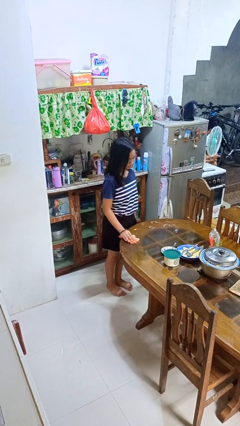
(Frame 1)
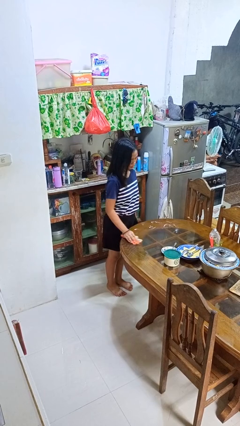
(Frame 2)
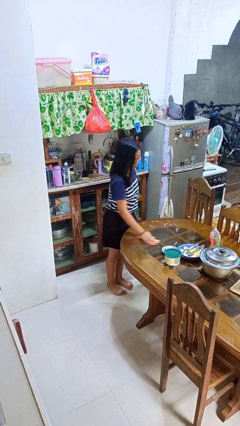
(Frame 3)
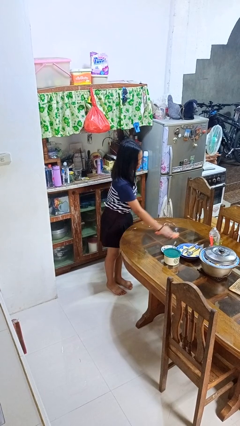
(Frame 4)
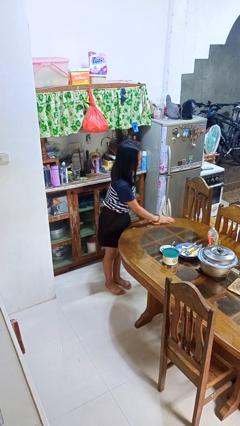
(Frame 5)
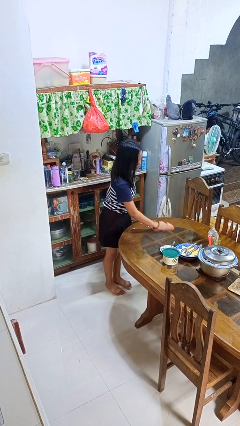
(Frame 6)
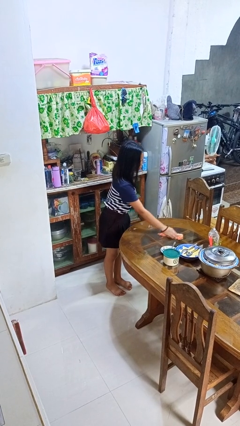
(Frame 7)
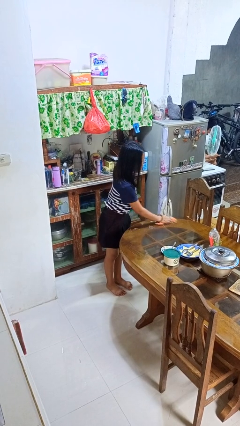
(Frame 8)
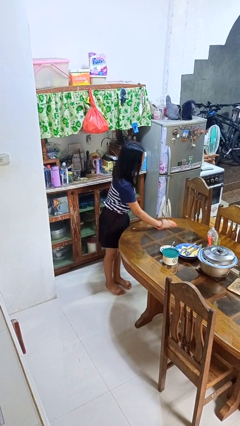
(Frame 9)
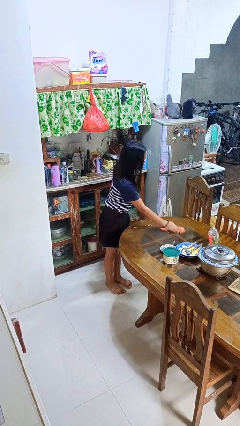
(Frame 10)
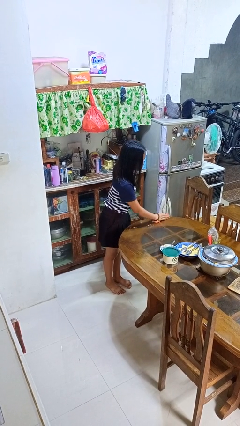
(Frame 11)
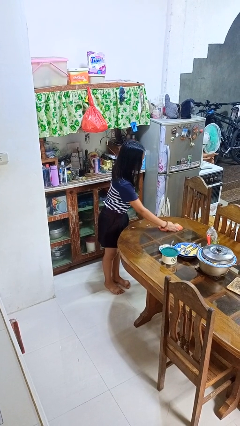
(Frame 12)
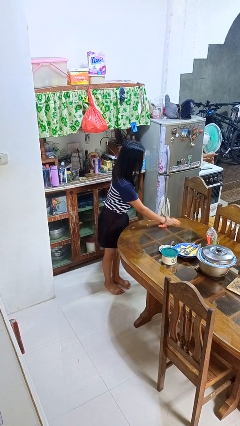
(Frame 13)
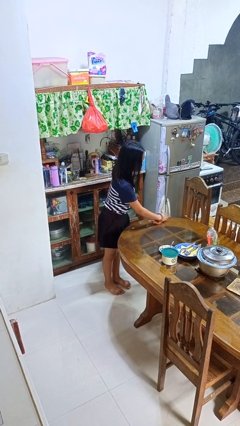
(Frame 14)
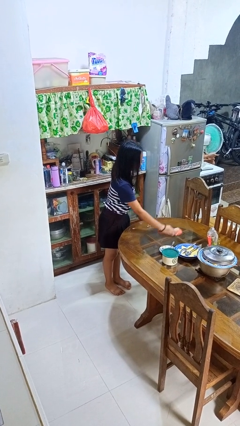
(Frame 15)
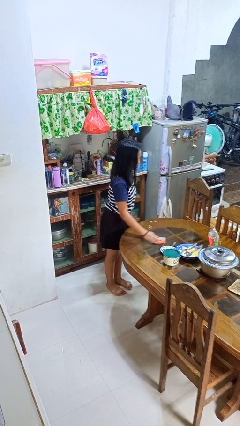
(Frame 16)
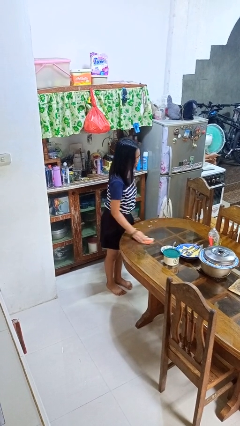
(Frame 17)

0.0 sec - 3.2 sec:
person cleans table with rag

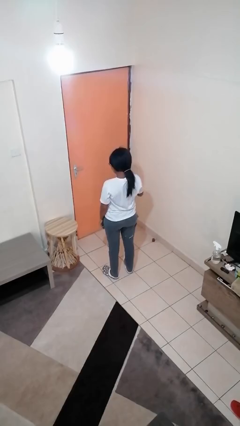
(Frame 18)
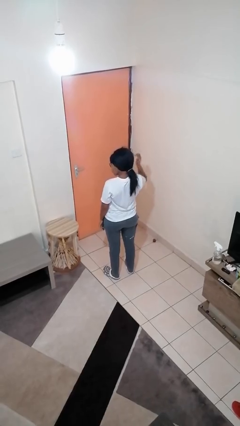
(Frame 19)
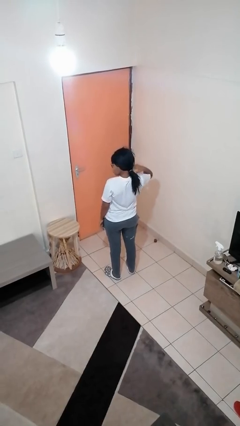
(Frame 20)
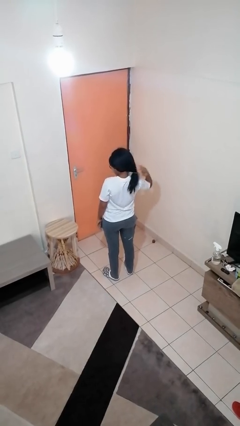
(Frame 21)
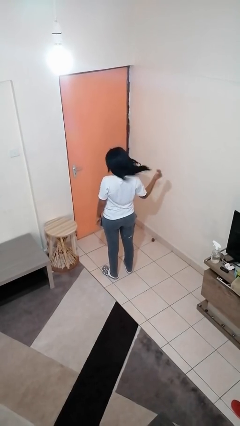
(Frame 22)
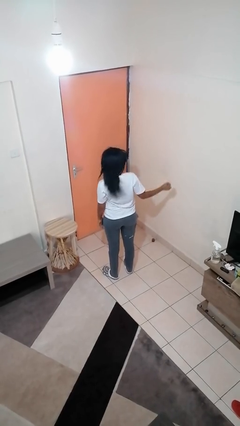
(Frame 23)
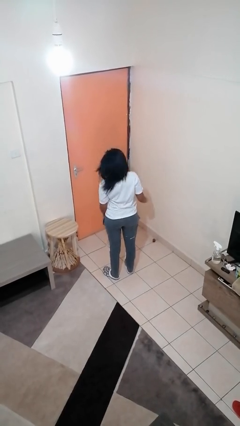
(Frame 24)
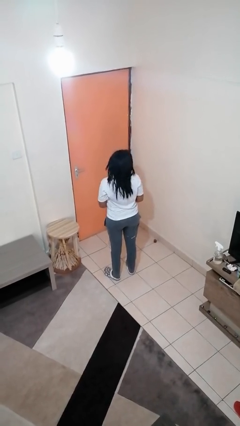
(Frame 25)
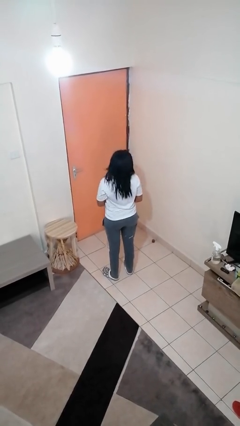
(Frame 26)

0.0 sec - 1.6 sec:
person takes off hairtie

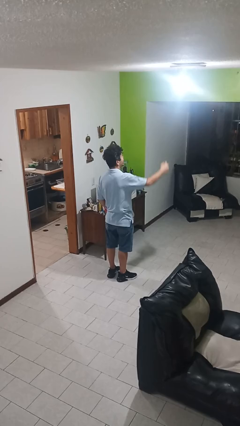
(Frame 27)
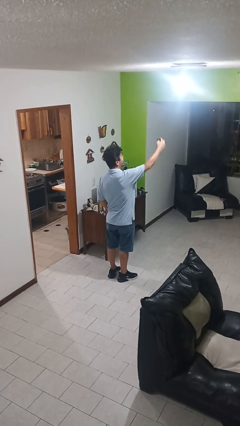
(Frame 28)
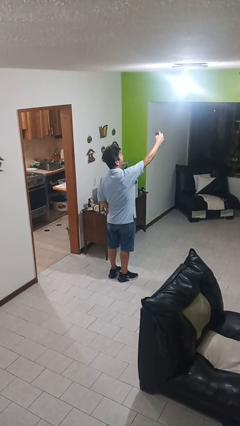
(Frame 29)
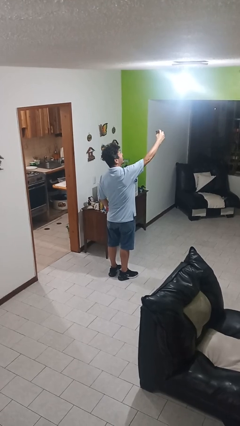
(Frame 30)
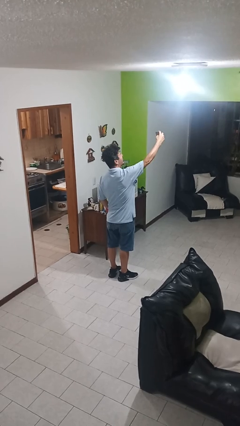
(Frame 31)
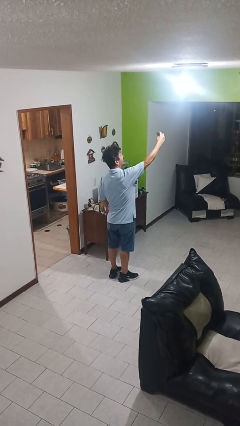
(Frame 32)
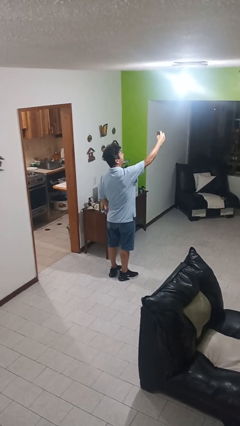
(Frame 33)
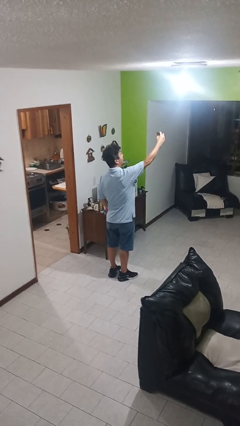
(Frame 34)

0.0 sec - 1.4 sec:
person takes selfie

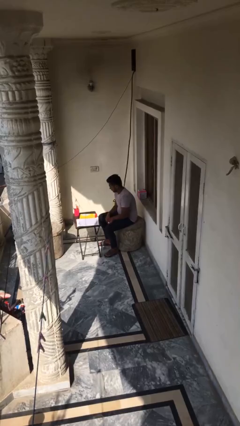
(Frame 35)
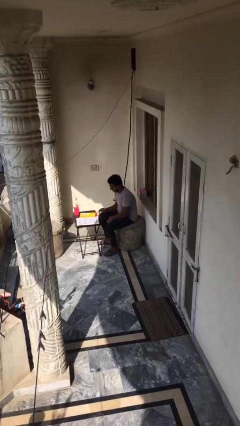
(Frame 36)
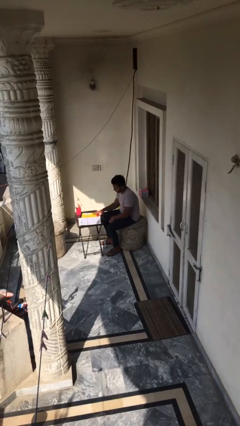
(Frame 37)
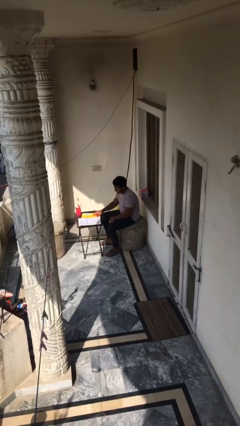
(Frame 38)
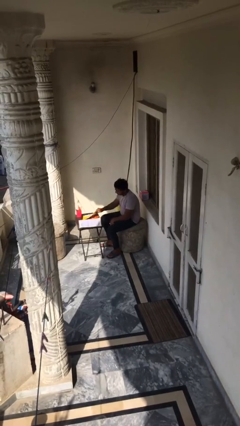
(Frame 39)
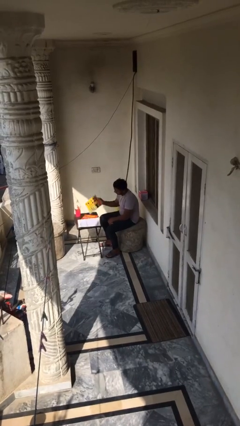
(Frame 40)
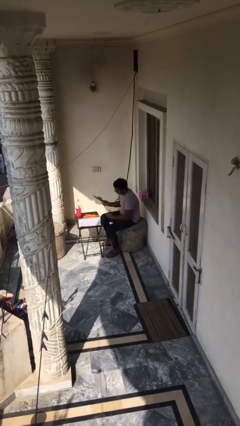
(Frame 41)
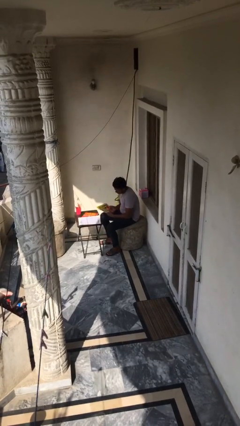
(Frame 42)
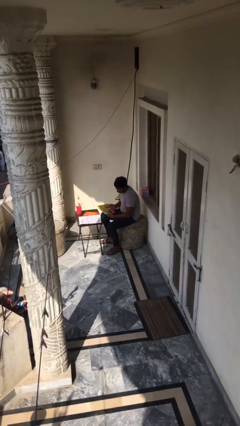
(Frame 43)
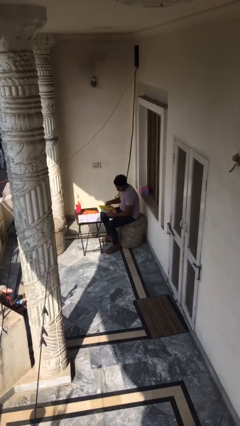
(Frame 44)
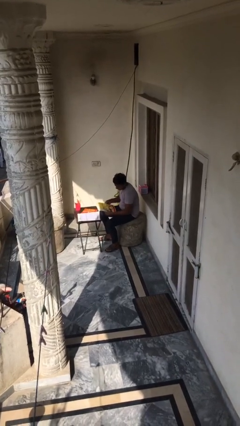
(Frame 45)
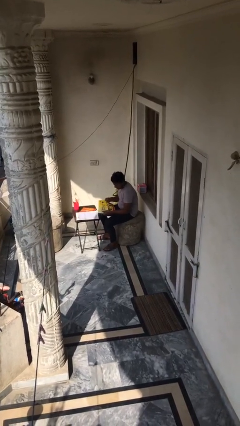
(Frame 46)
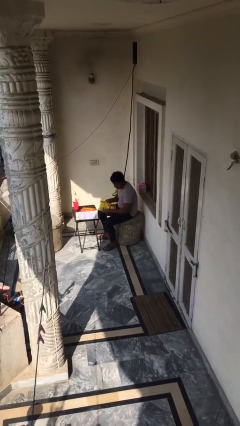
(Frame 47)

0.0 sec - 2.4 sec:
person picks up object from table

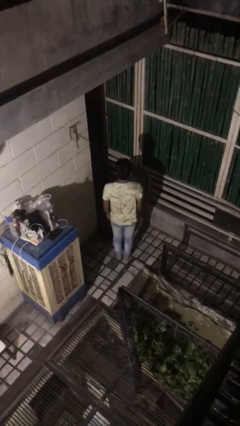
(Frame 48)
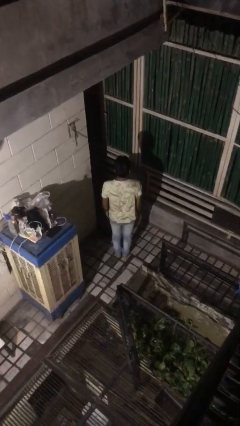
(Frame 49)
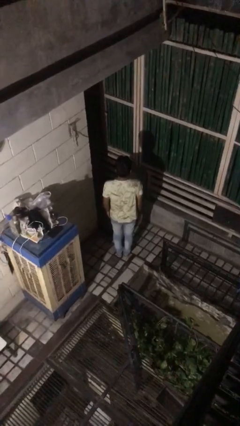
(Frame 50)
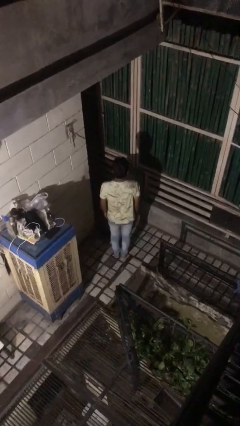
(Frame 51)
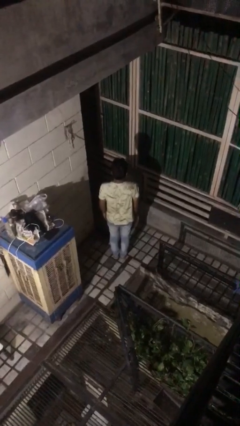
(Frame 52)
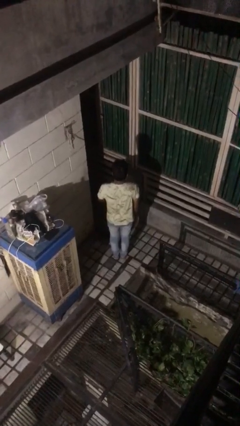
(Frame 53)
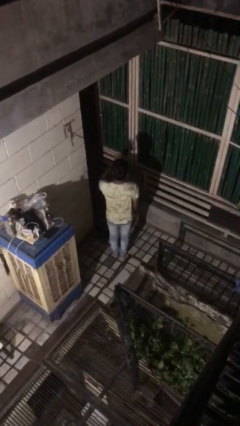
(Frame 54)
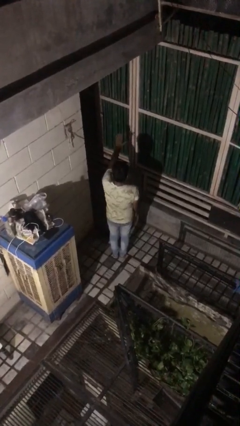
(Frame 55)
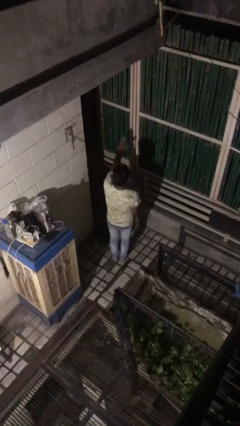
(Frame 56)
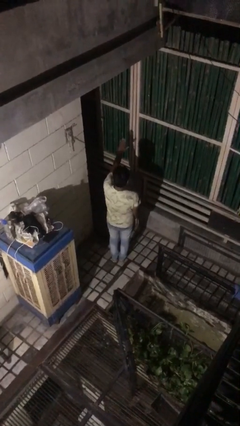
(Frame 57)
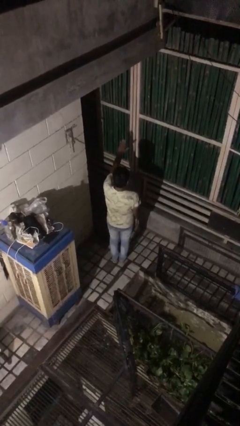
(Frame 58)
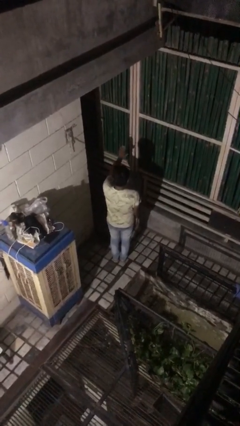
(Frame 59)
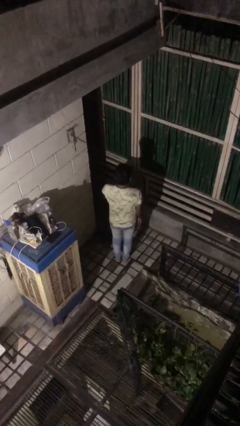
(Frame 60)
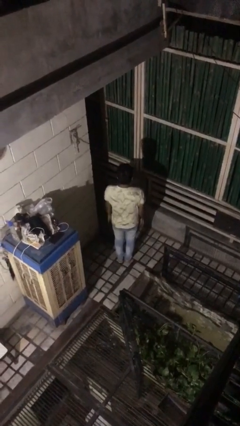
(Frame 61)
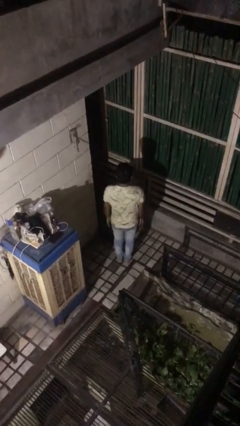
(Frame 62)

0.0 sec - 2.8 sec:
person gestures stop

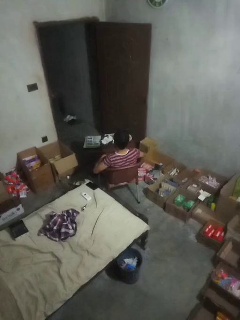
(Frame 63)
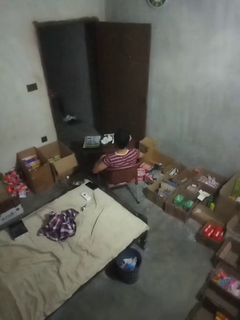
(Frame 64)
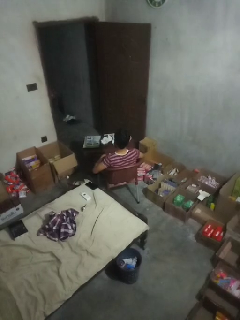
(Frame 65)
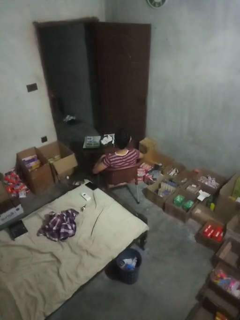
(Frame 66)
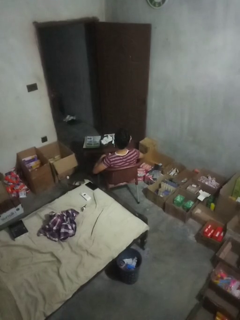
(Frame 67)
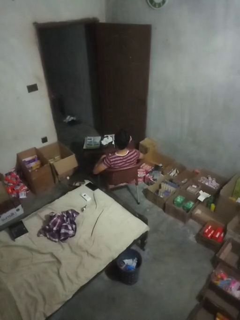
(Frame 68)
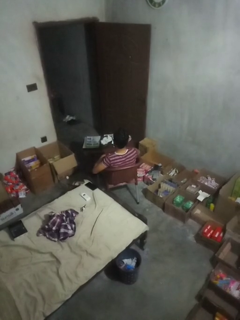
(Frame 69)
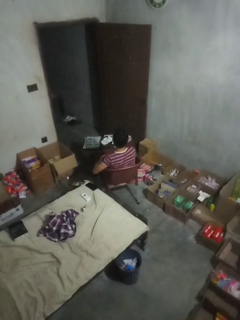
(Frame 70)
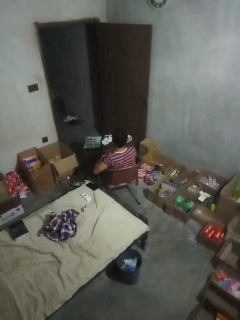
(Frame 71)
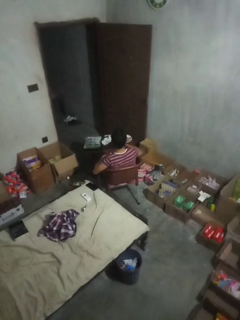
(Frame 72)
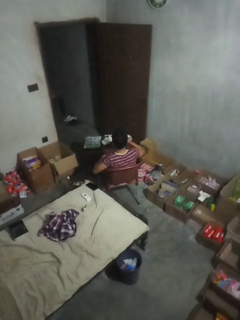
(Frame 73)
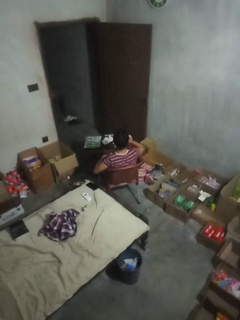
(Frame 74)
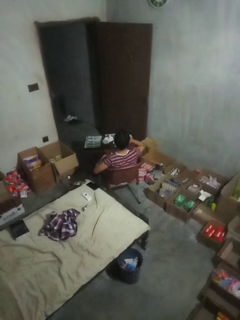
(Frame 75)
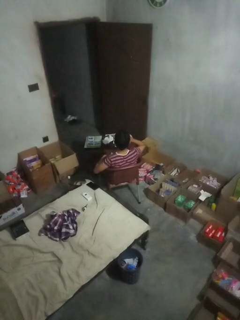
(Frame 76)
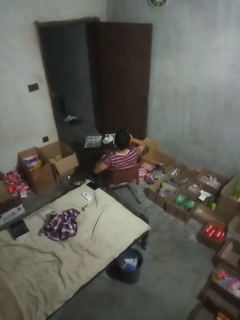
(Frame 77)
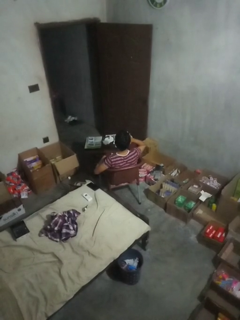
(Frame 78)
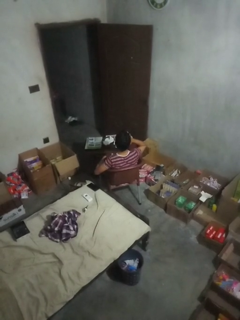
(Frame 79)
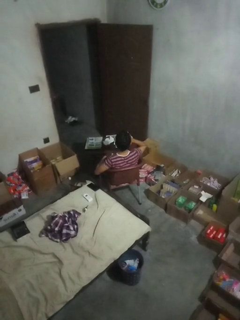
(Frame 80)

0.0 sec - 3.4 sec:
person drinks from cup

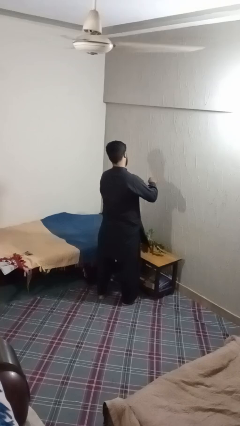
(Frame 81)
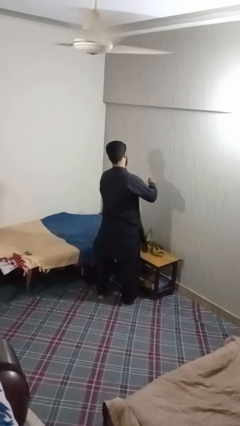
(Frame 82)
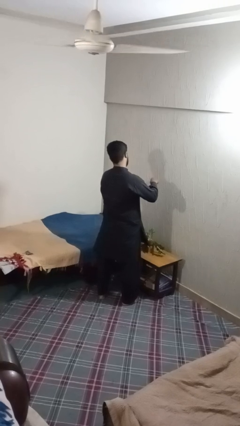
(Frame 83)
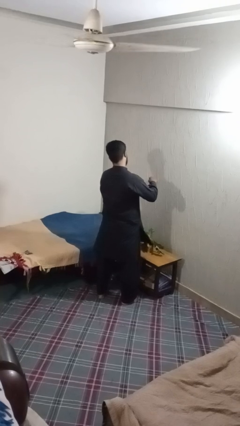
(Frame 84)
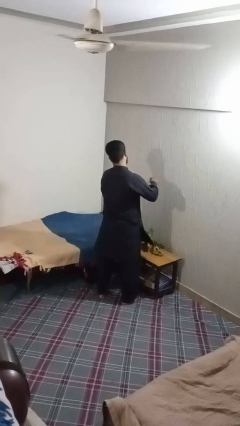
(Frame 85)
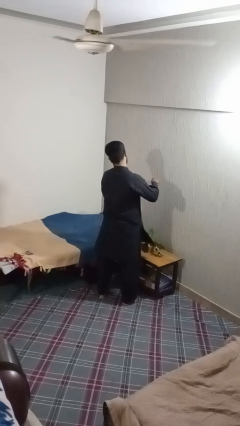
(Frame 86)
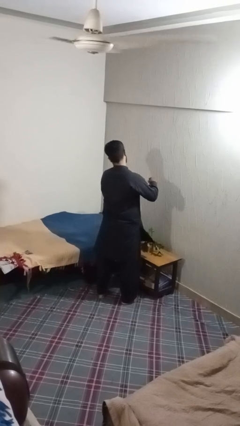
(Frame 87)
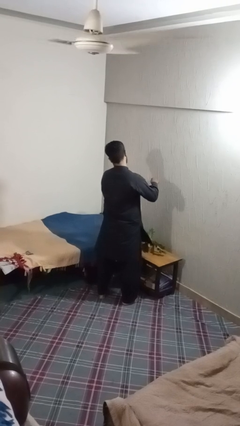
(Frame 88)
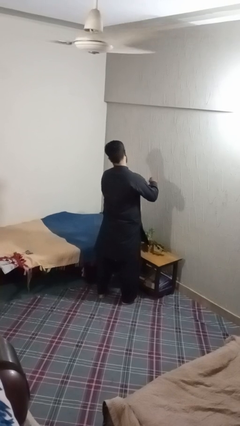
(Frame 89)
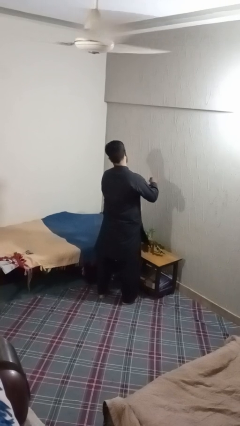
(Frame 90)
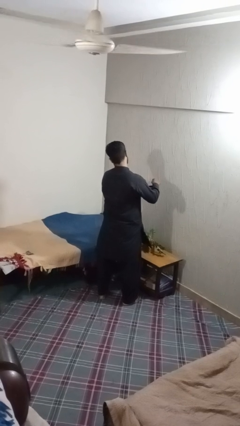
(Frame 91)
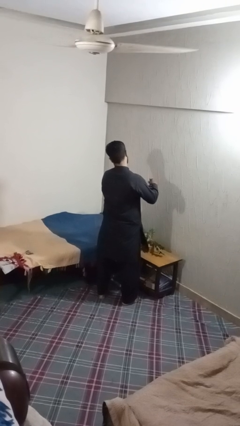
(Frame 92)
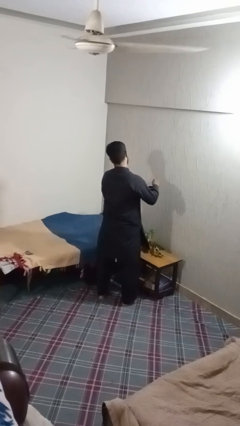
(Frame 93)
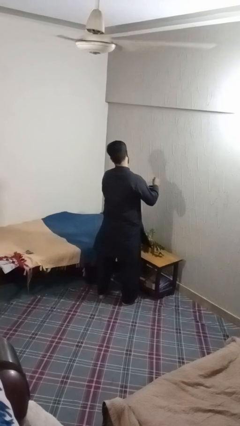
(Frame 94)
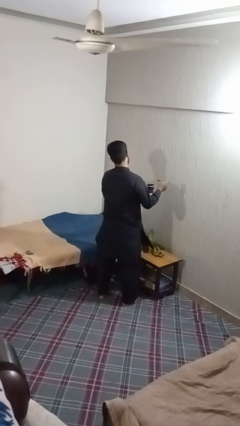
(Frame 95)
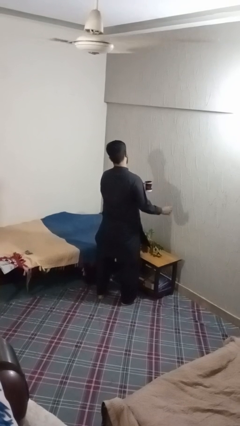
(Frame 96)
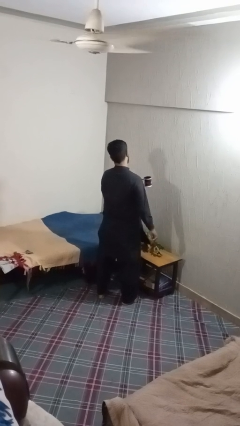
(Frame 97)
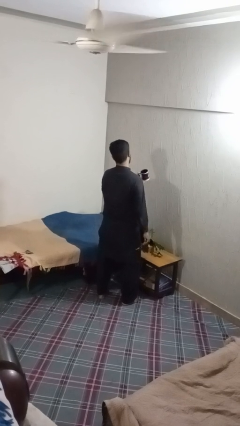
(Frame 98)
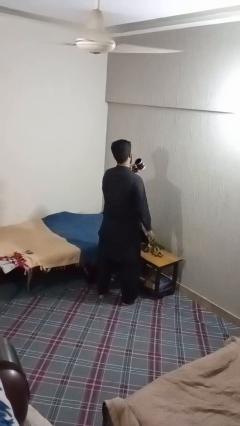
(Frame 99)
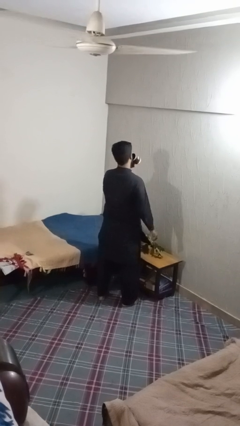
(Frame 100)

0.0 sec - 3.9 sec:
person stirs mug
